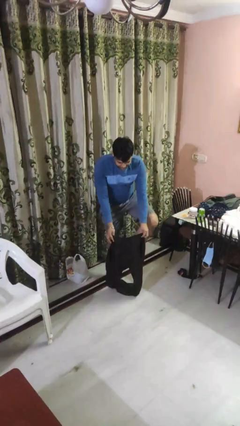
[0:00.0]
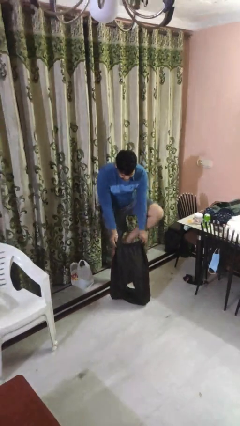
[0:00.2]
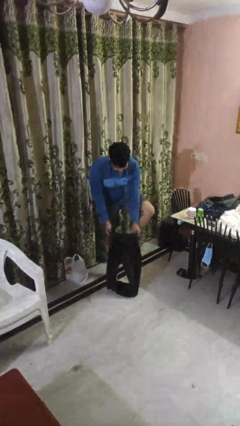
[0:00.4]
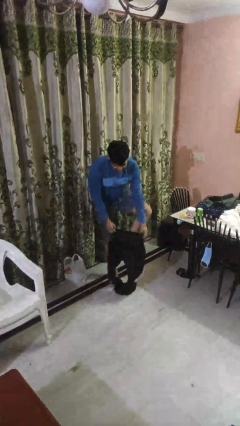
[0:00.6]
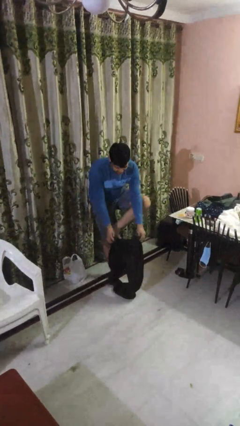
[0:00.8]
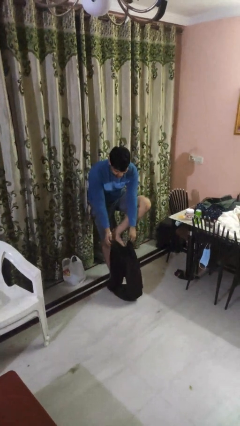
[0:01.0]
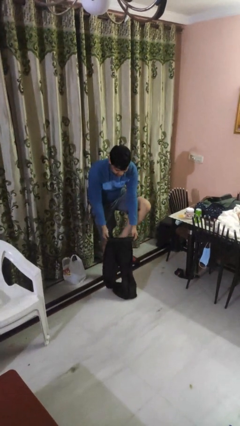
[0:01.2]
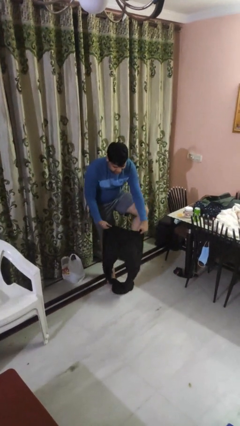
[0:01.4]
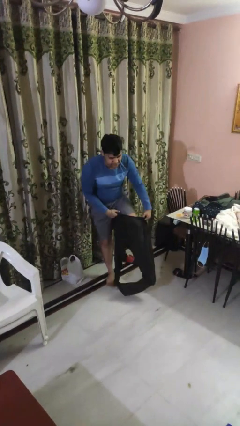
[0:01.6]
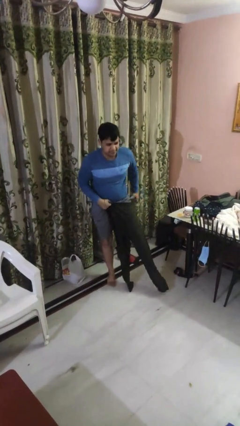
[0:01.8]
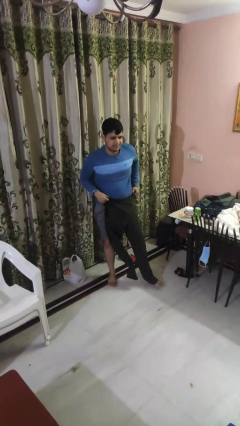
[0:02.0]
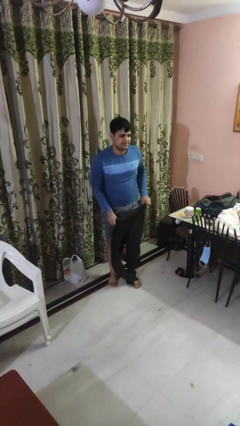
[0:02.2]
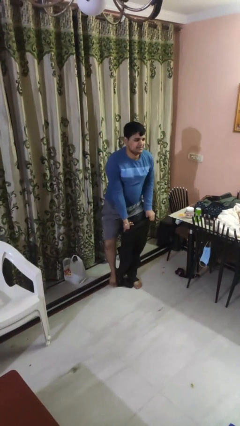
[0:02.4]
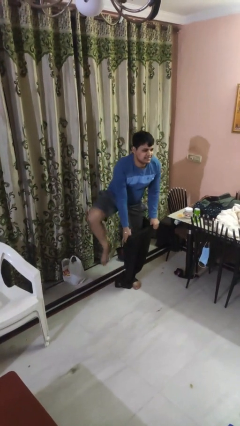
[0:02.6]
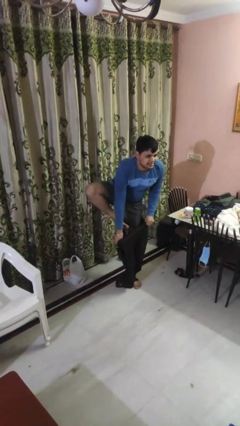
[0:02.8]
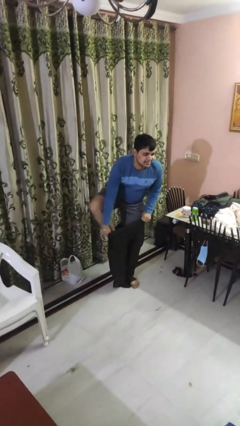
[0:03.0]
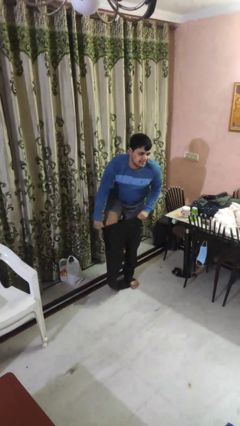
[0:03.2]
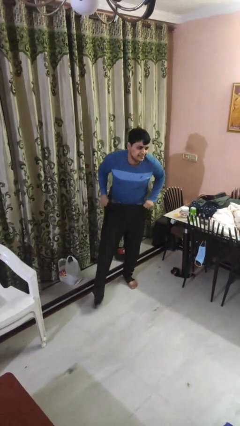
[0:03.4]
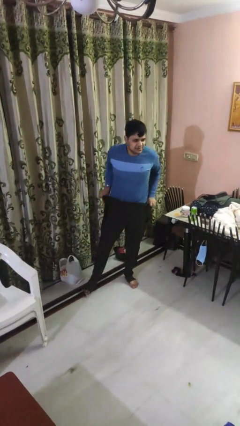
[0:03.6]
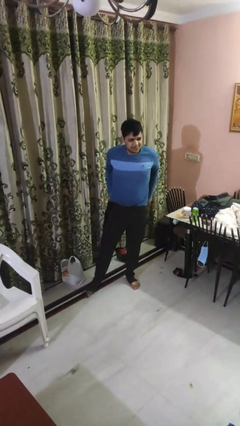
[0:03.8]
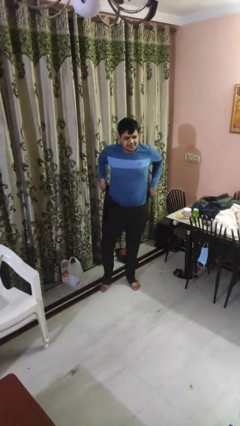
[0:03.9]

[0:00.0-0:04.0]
person puts on pants

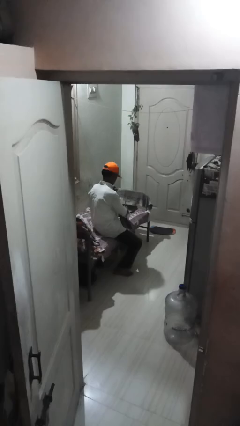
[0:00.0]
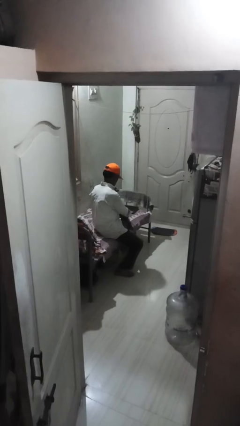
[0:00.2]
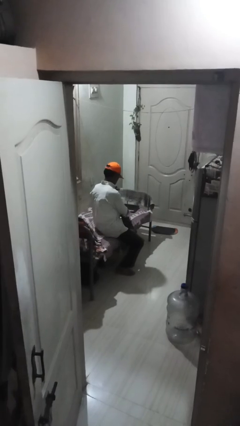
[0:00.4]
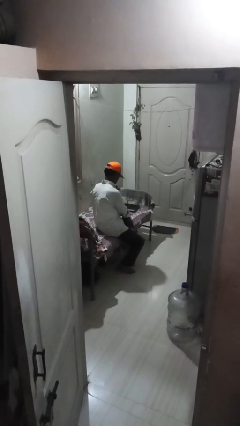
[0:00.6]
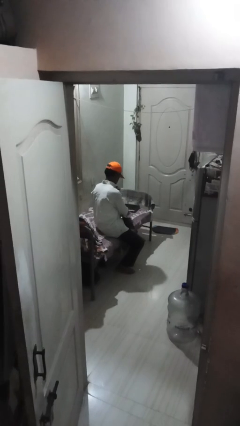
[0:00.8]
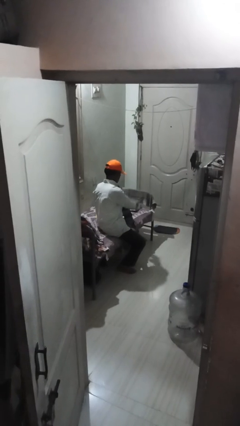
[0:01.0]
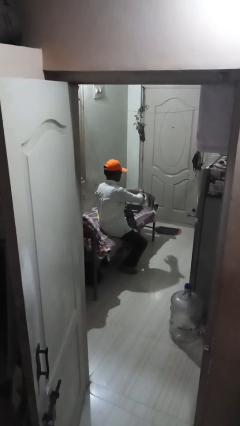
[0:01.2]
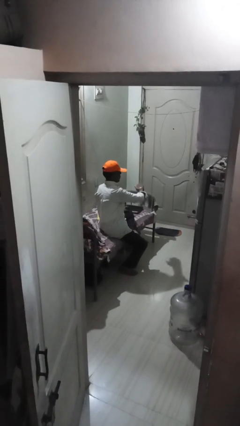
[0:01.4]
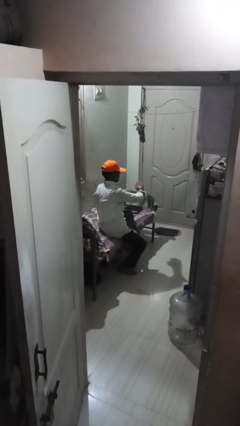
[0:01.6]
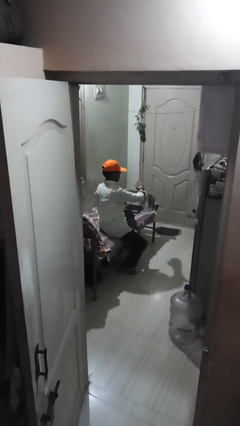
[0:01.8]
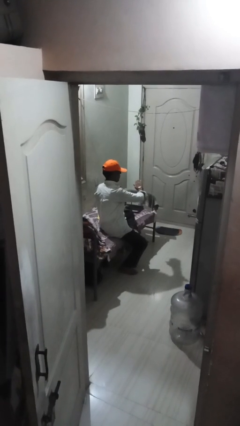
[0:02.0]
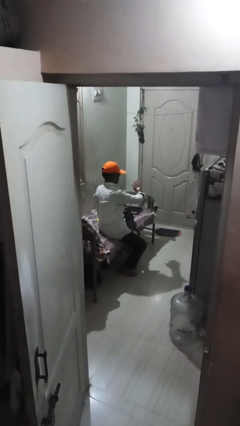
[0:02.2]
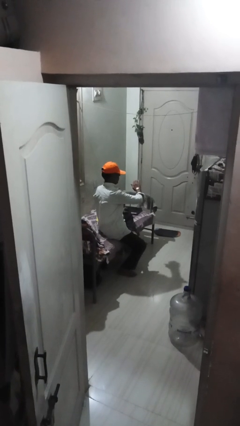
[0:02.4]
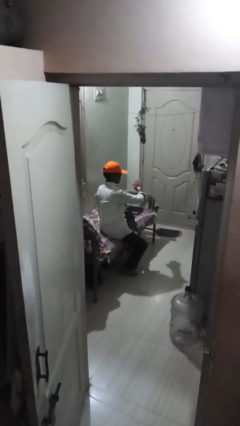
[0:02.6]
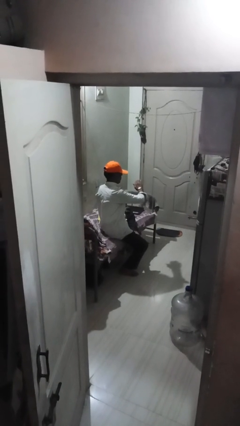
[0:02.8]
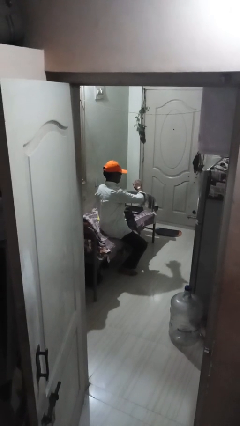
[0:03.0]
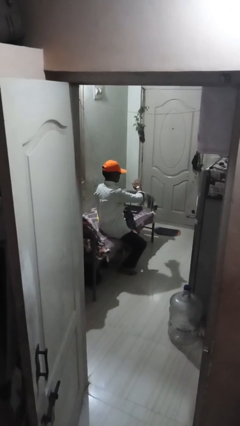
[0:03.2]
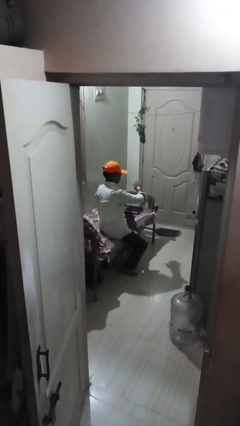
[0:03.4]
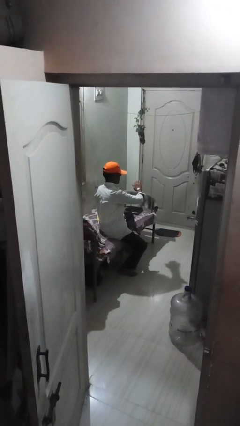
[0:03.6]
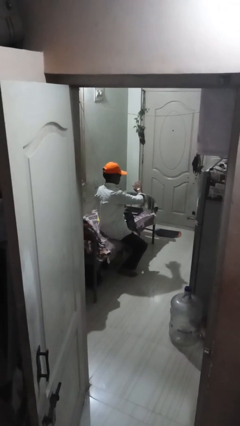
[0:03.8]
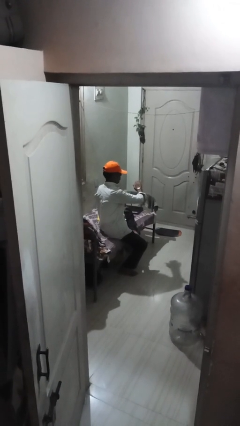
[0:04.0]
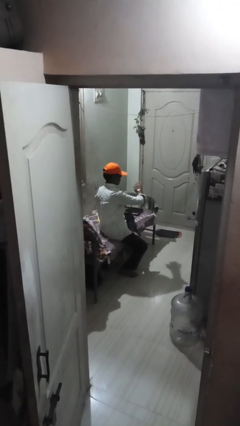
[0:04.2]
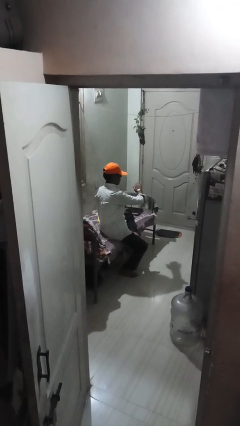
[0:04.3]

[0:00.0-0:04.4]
person looks at wristwatch

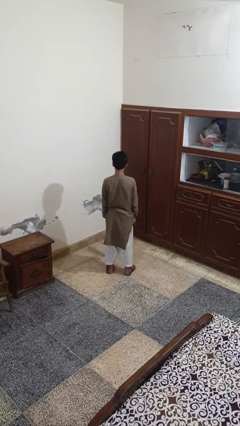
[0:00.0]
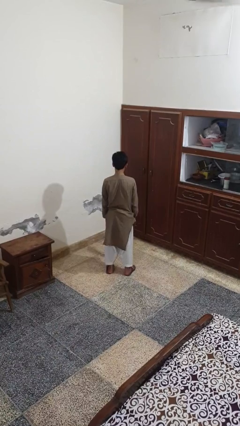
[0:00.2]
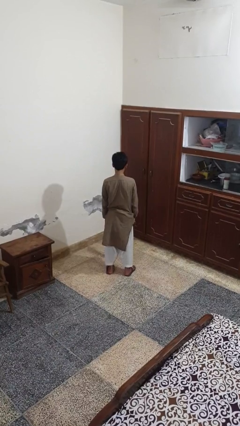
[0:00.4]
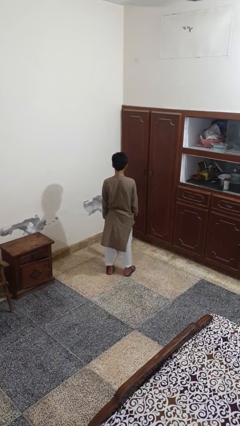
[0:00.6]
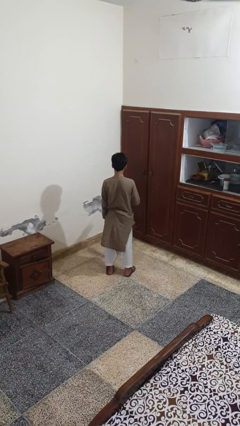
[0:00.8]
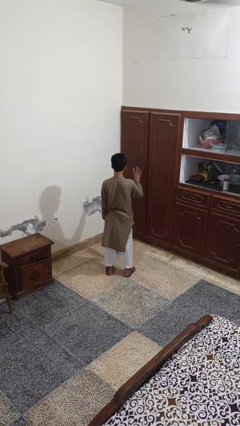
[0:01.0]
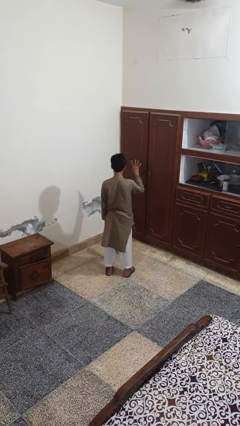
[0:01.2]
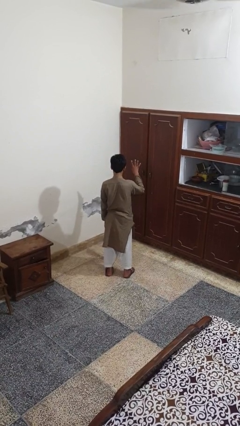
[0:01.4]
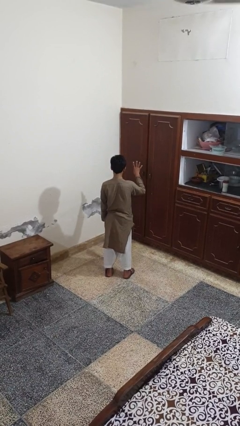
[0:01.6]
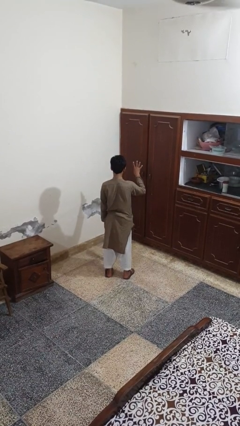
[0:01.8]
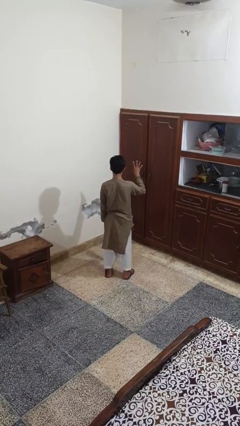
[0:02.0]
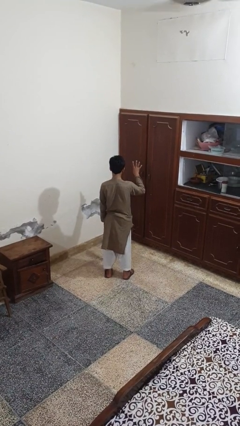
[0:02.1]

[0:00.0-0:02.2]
person gestures number four

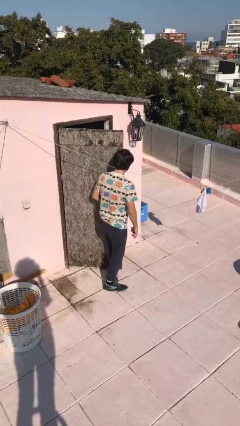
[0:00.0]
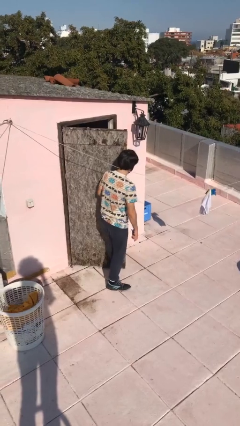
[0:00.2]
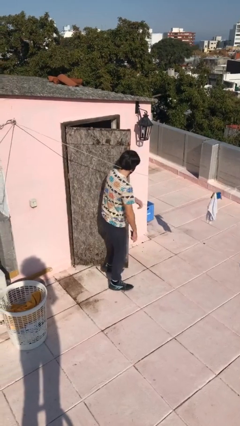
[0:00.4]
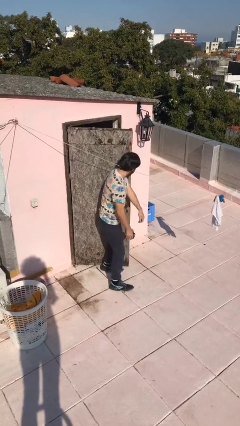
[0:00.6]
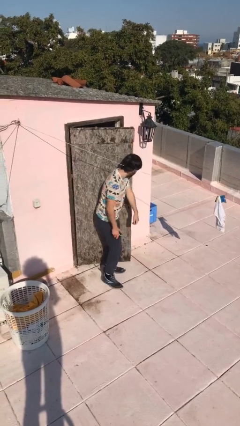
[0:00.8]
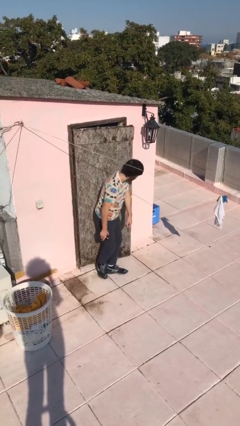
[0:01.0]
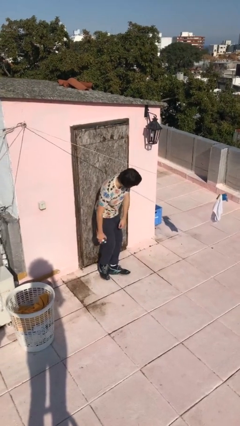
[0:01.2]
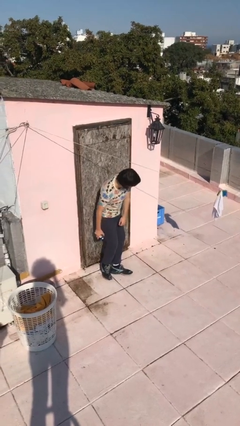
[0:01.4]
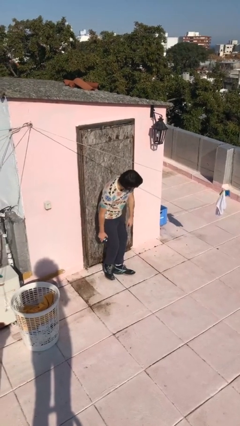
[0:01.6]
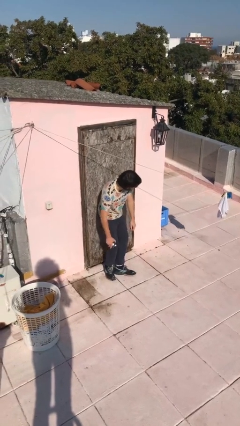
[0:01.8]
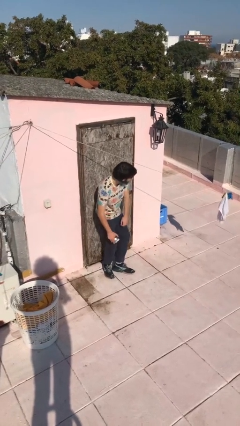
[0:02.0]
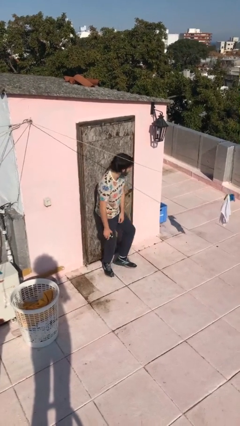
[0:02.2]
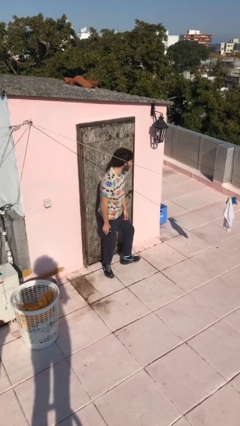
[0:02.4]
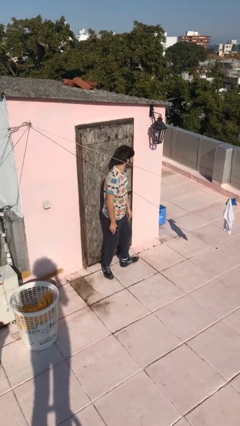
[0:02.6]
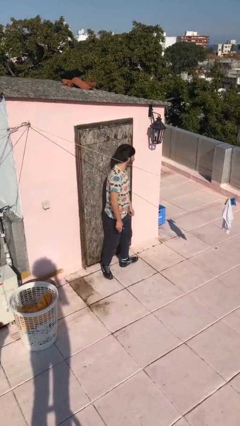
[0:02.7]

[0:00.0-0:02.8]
person closes door with hip

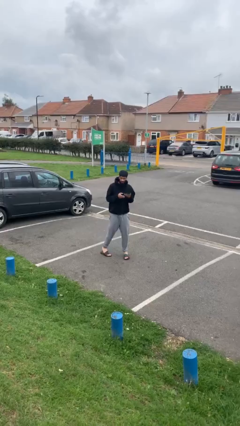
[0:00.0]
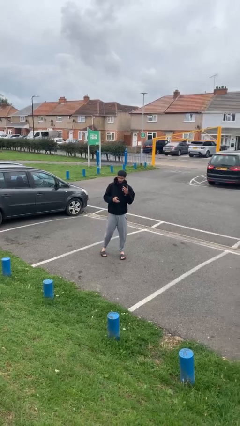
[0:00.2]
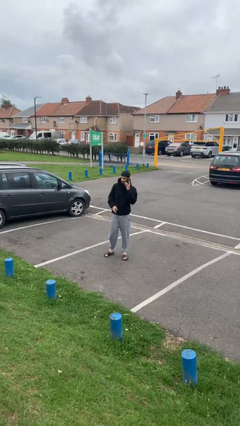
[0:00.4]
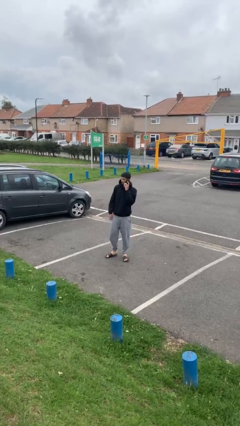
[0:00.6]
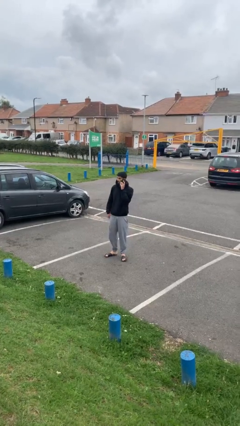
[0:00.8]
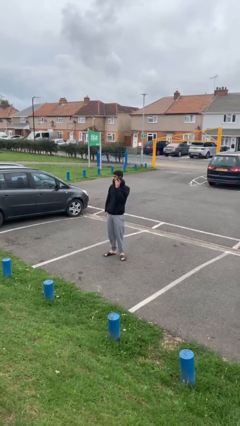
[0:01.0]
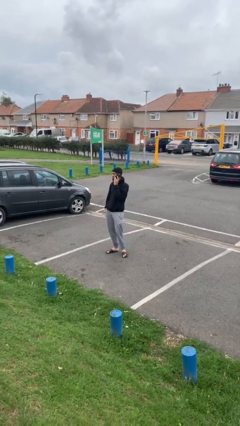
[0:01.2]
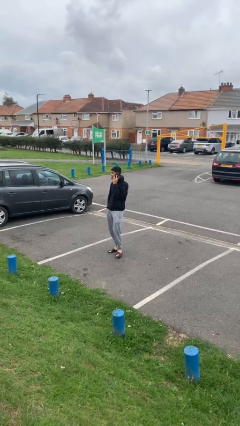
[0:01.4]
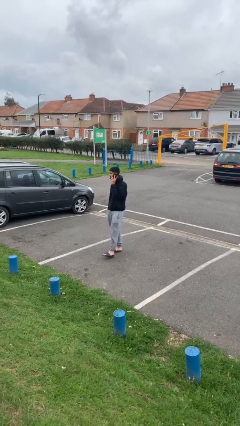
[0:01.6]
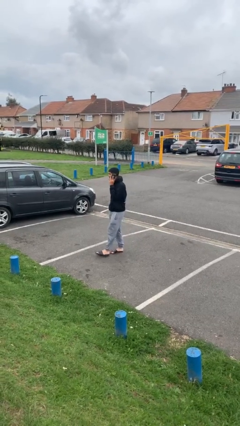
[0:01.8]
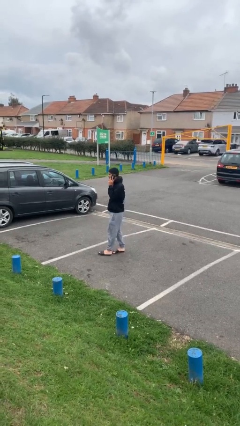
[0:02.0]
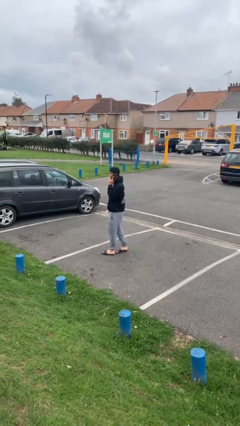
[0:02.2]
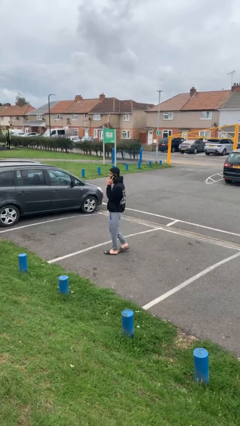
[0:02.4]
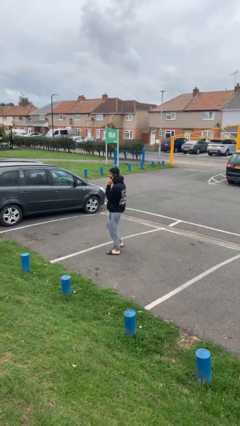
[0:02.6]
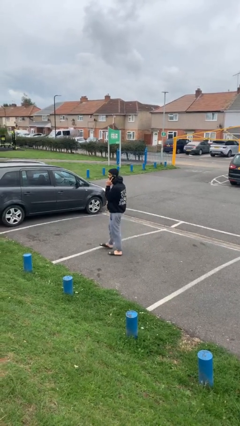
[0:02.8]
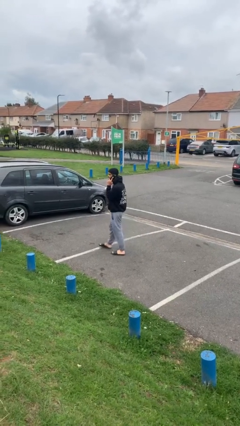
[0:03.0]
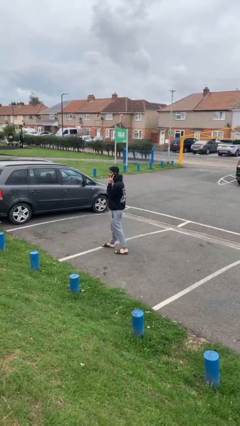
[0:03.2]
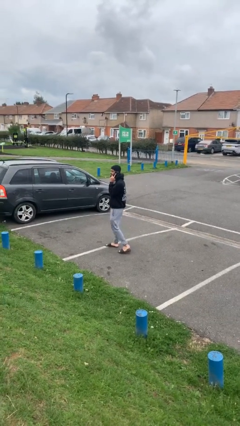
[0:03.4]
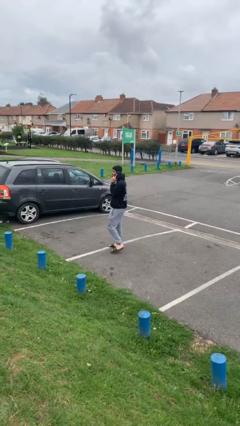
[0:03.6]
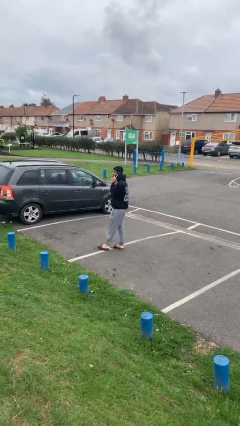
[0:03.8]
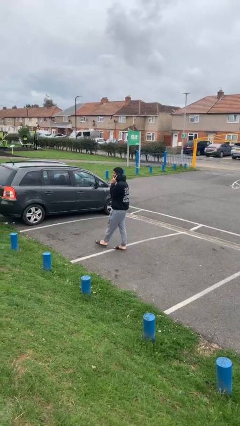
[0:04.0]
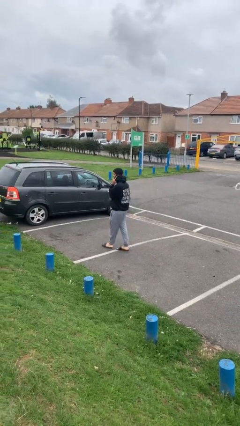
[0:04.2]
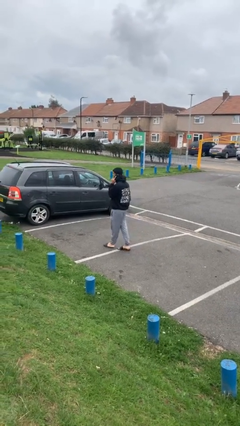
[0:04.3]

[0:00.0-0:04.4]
person talks on phone
